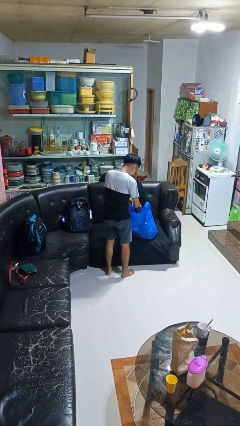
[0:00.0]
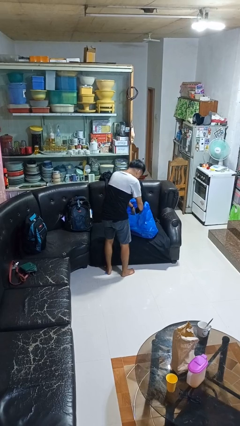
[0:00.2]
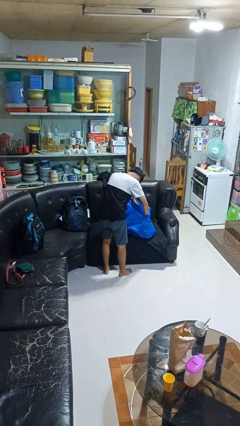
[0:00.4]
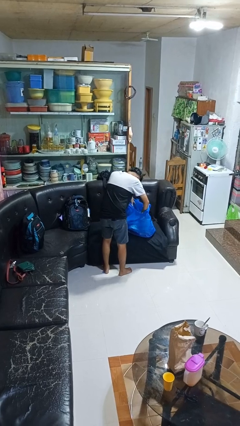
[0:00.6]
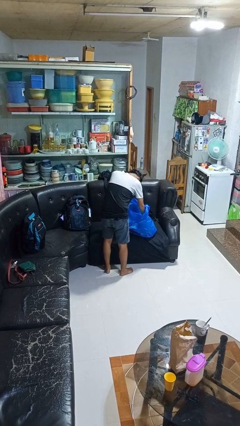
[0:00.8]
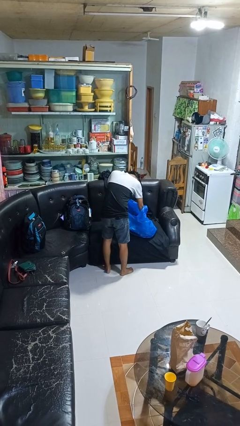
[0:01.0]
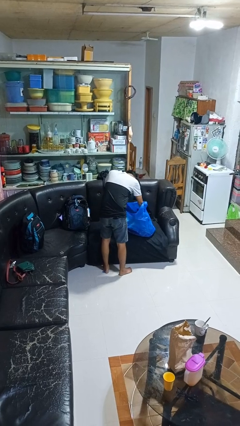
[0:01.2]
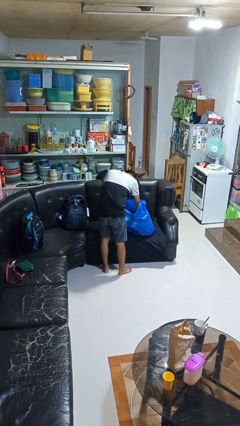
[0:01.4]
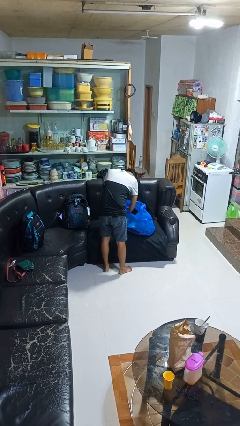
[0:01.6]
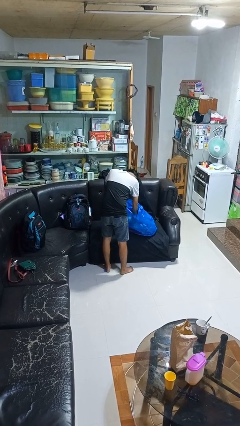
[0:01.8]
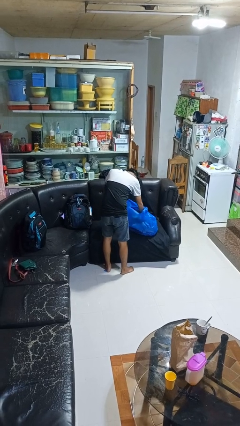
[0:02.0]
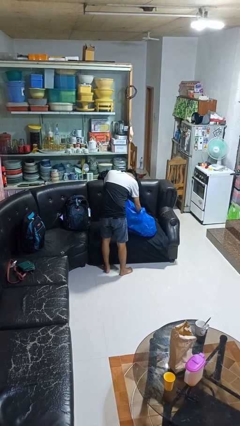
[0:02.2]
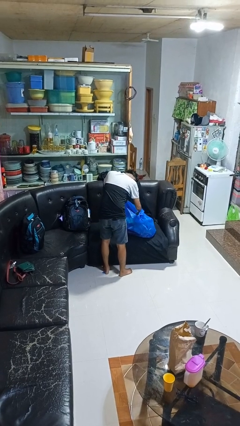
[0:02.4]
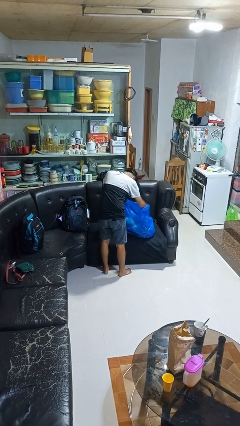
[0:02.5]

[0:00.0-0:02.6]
person searches in bag

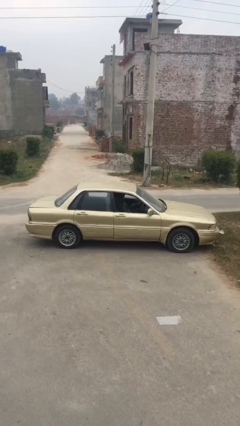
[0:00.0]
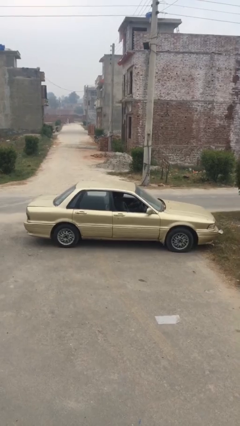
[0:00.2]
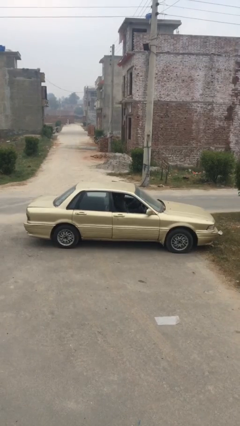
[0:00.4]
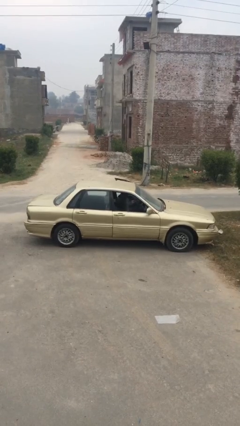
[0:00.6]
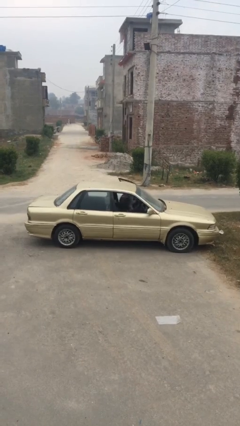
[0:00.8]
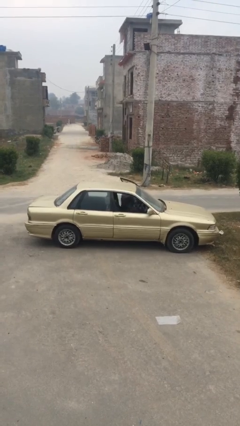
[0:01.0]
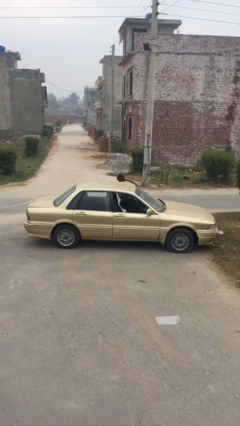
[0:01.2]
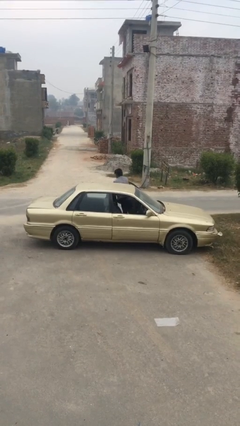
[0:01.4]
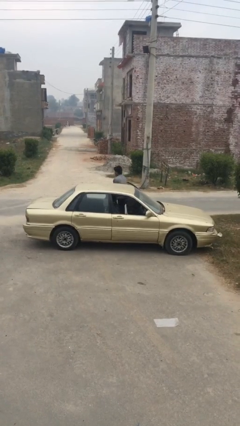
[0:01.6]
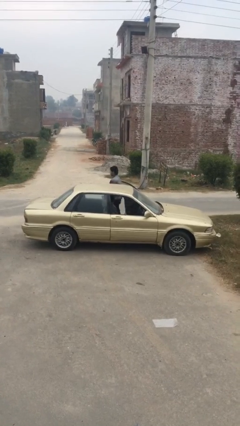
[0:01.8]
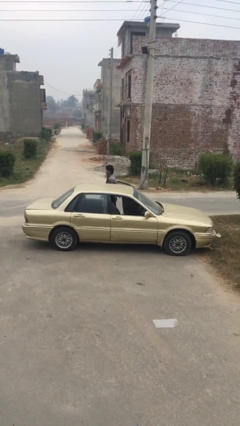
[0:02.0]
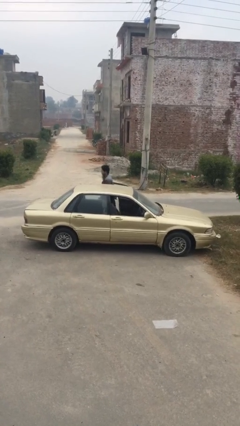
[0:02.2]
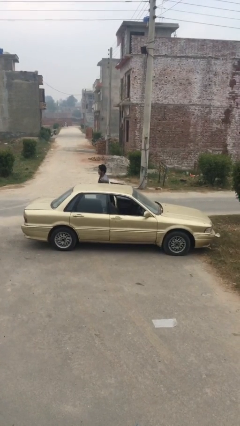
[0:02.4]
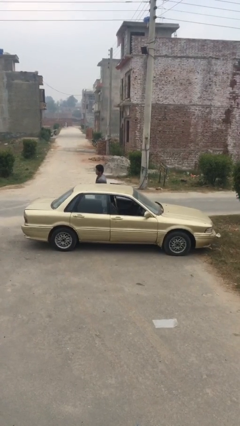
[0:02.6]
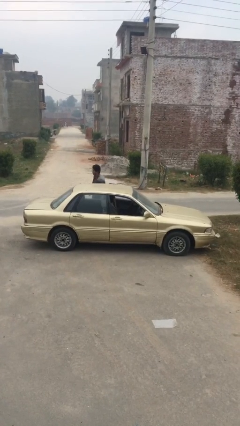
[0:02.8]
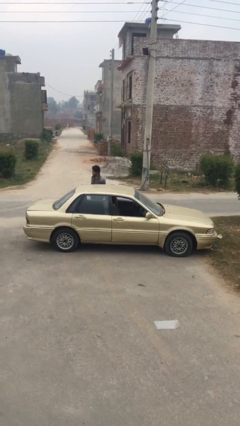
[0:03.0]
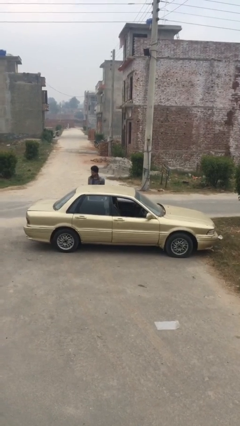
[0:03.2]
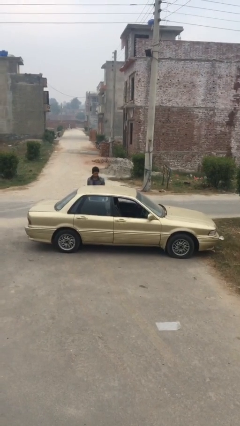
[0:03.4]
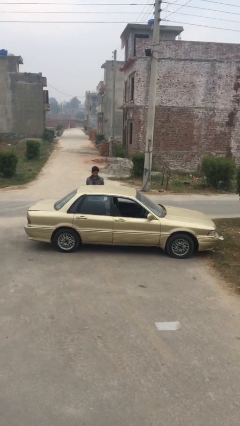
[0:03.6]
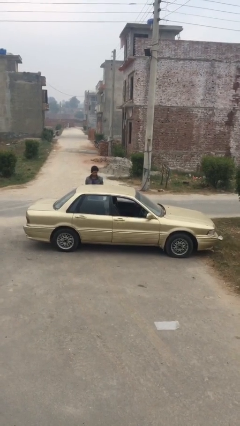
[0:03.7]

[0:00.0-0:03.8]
car drops off person

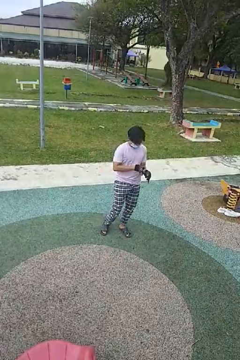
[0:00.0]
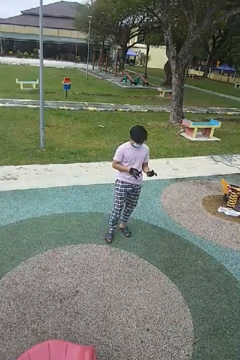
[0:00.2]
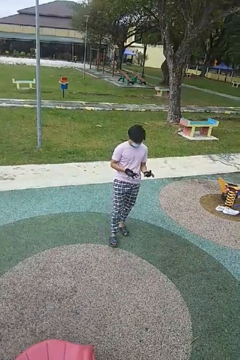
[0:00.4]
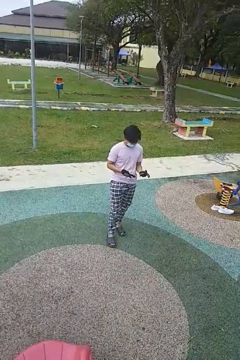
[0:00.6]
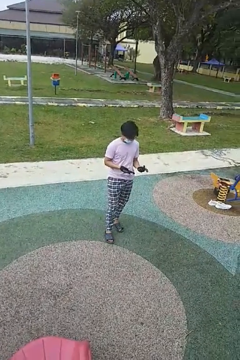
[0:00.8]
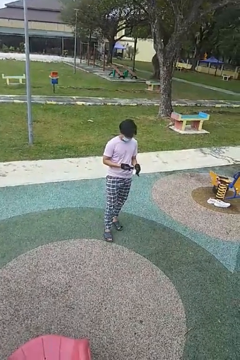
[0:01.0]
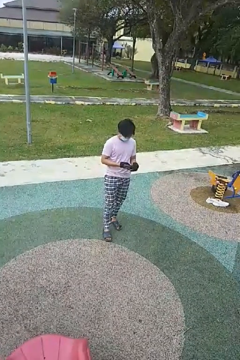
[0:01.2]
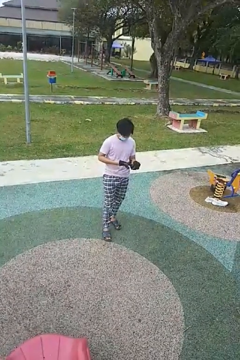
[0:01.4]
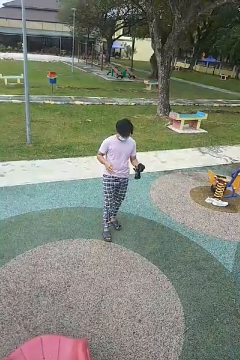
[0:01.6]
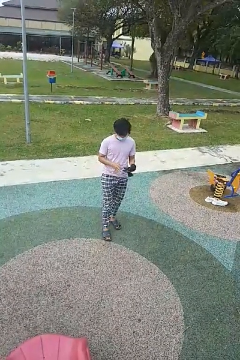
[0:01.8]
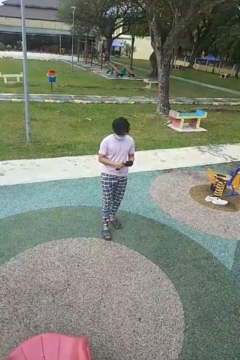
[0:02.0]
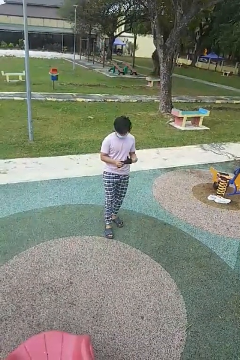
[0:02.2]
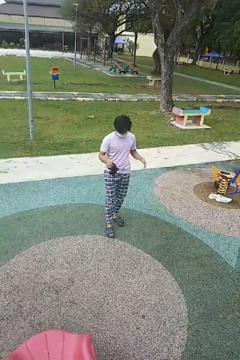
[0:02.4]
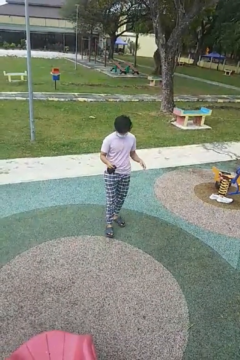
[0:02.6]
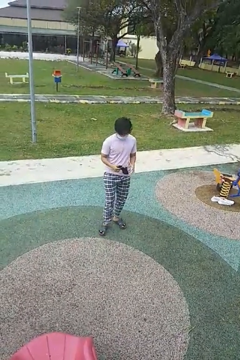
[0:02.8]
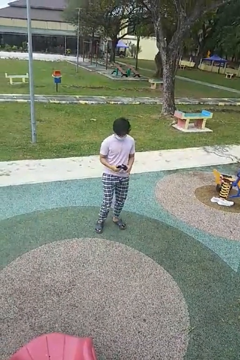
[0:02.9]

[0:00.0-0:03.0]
person takes off gloves

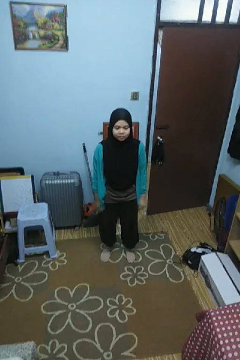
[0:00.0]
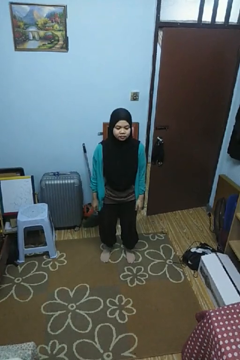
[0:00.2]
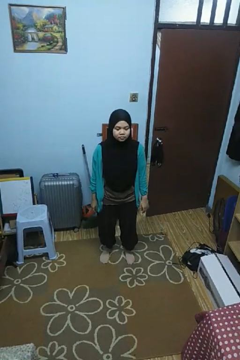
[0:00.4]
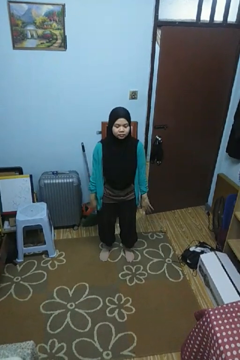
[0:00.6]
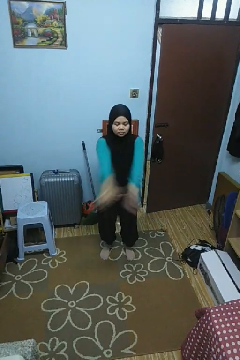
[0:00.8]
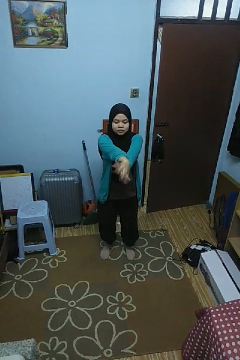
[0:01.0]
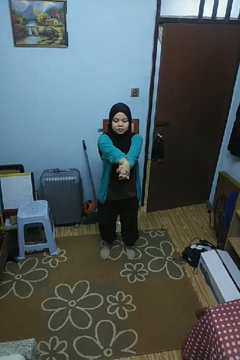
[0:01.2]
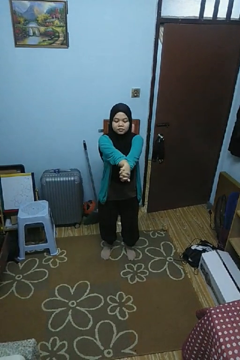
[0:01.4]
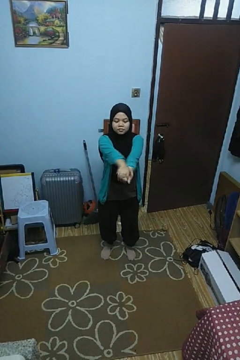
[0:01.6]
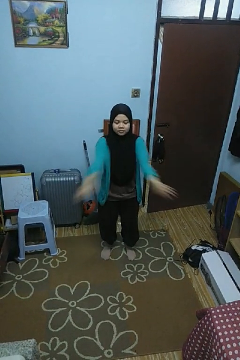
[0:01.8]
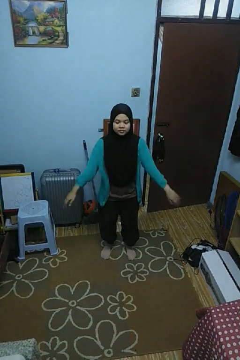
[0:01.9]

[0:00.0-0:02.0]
person crosses arms

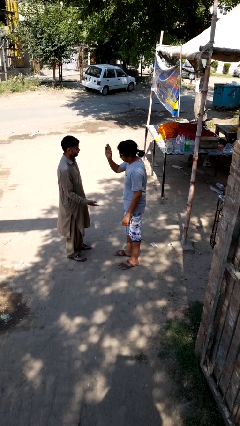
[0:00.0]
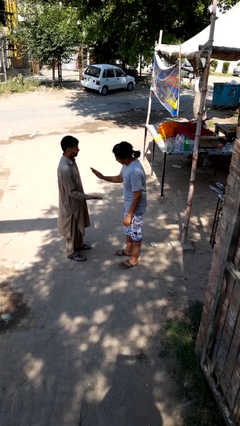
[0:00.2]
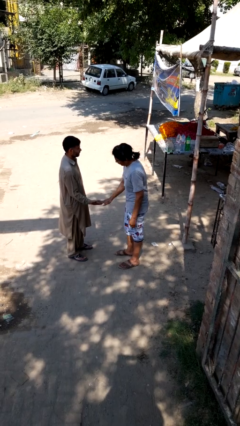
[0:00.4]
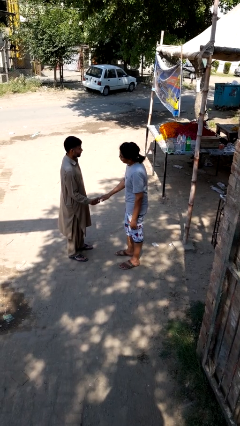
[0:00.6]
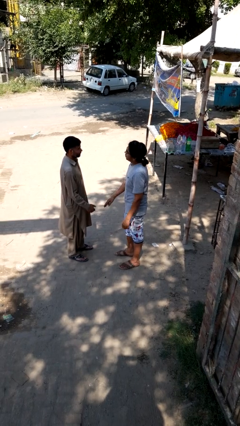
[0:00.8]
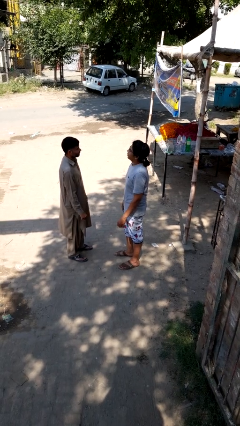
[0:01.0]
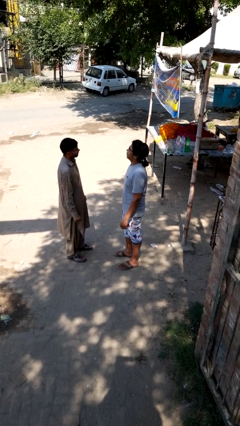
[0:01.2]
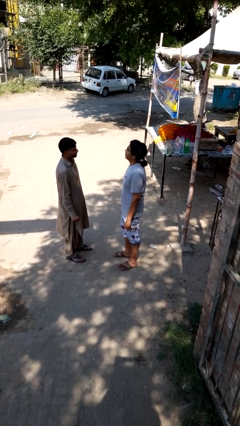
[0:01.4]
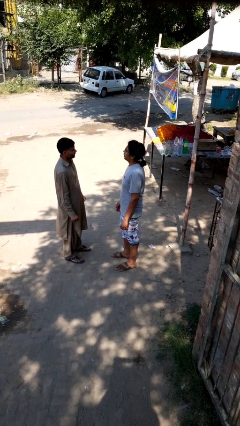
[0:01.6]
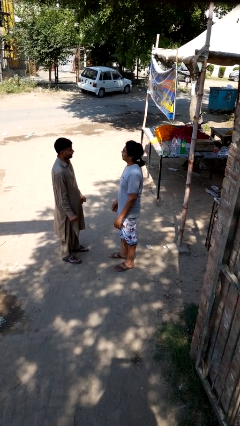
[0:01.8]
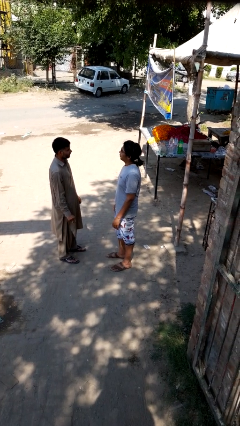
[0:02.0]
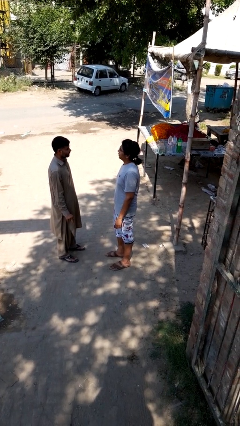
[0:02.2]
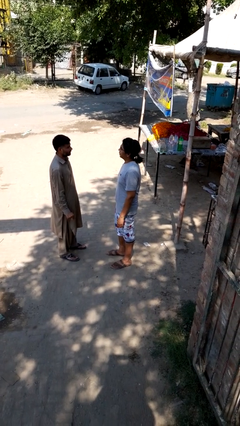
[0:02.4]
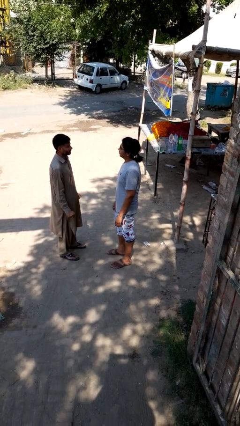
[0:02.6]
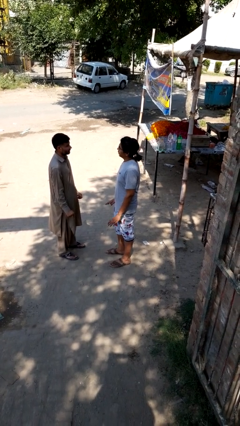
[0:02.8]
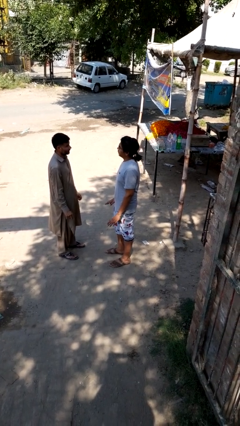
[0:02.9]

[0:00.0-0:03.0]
person highfives hand

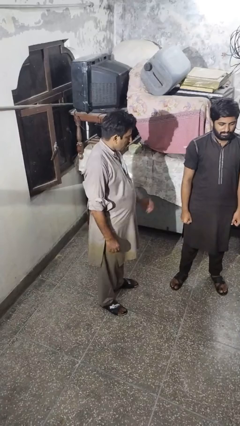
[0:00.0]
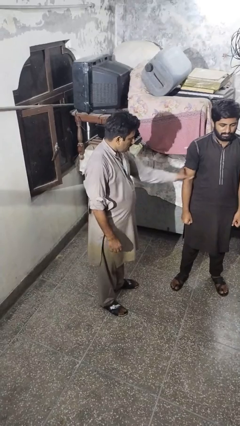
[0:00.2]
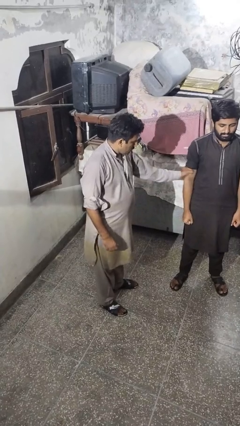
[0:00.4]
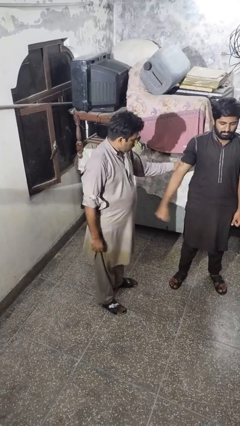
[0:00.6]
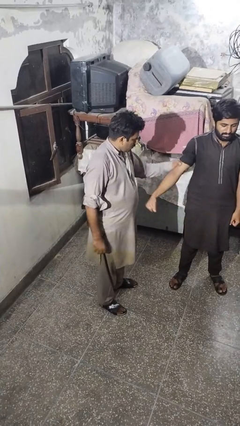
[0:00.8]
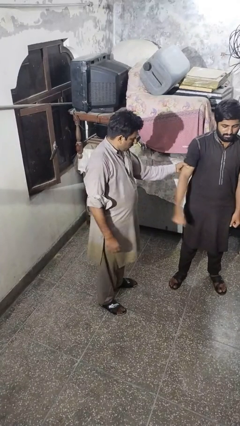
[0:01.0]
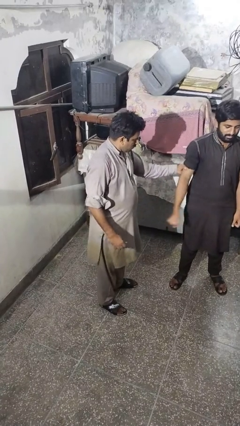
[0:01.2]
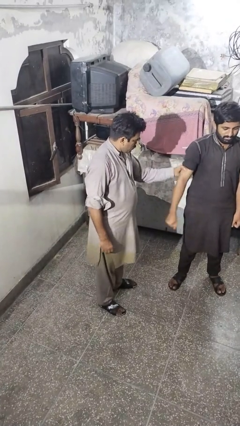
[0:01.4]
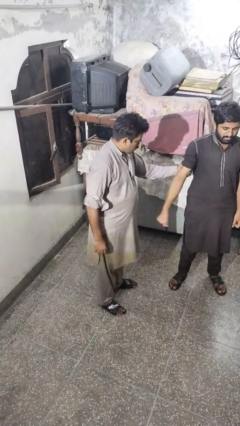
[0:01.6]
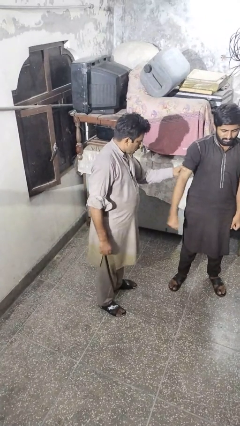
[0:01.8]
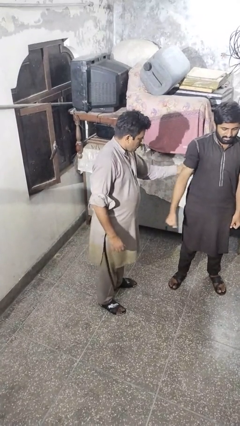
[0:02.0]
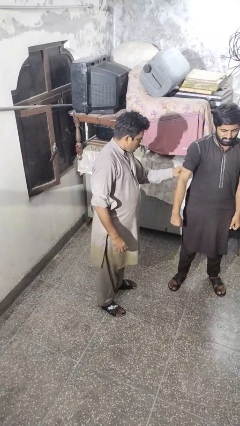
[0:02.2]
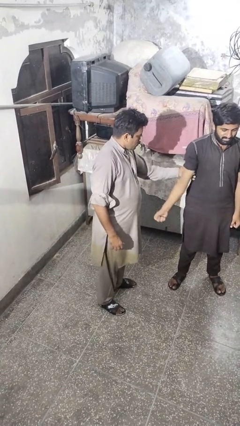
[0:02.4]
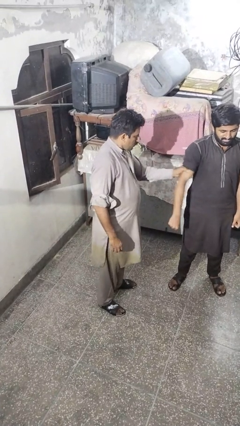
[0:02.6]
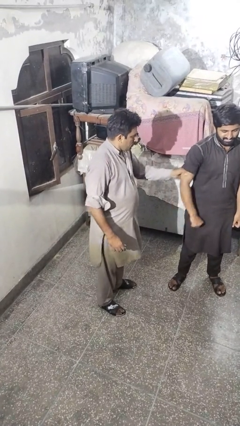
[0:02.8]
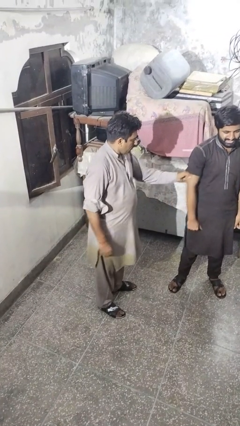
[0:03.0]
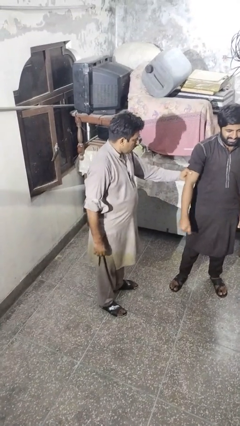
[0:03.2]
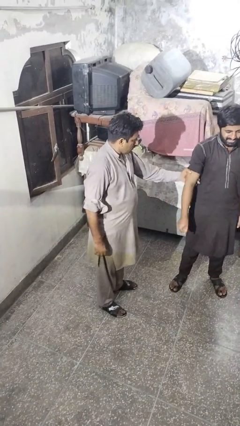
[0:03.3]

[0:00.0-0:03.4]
person grabs person by bicep

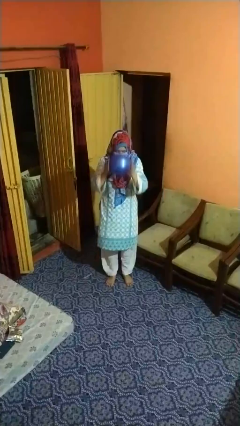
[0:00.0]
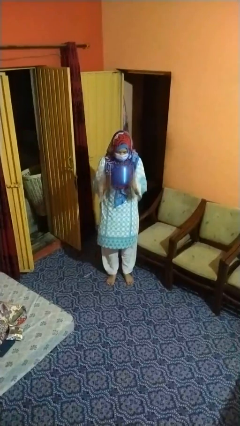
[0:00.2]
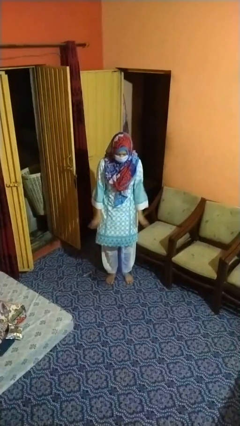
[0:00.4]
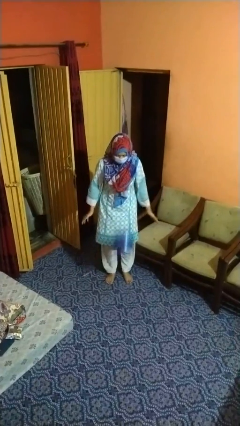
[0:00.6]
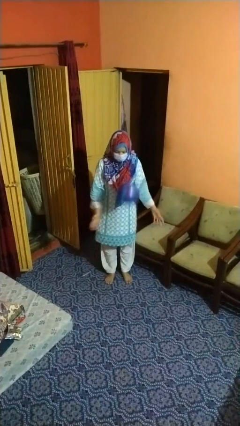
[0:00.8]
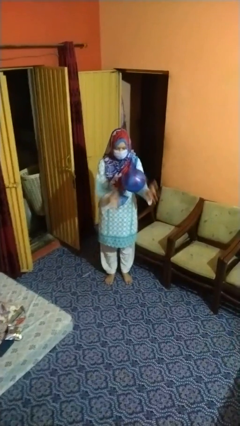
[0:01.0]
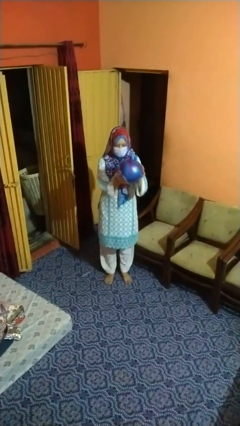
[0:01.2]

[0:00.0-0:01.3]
person bounces ball on floor
